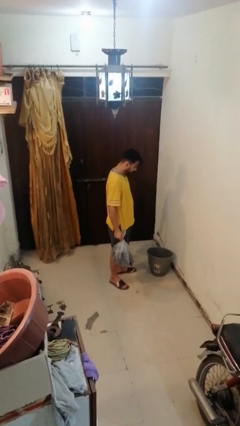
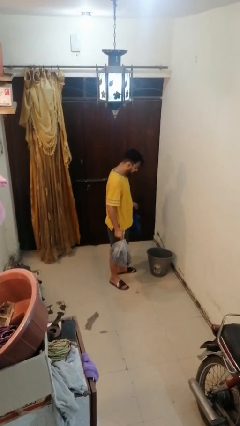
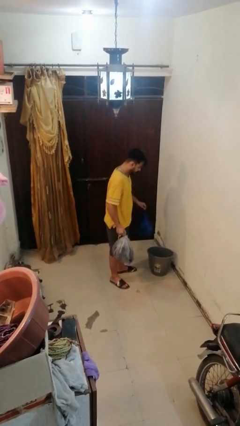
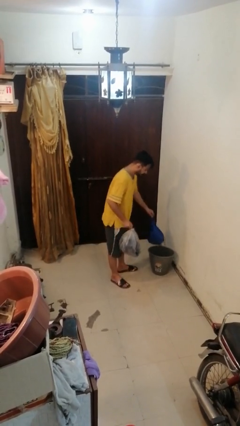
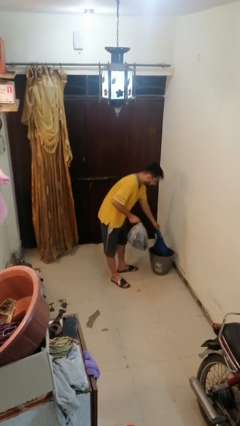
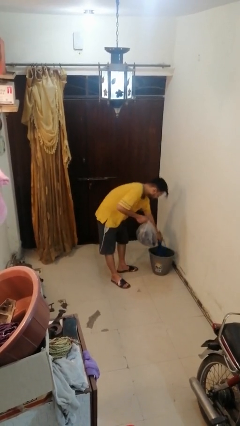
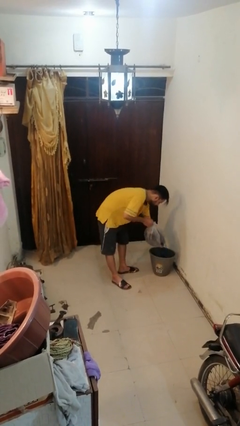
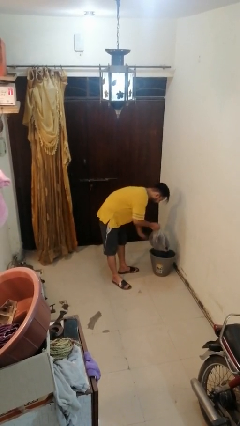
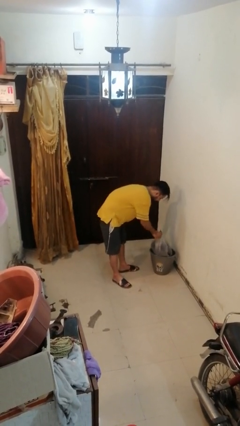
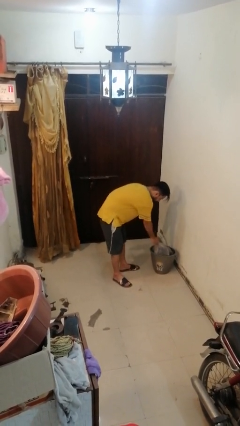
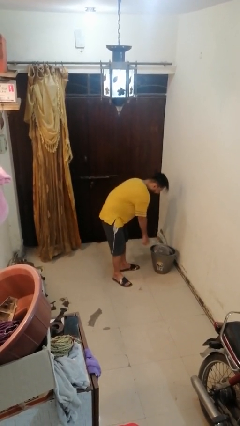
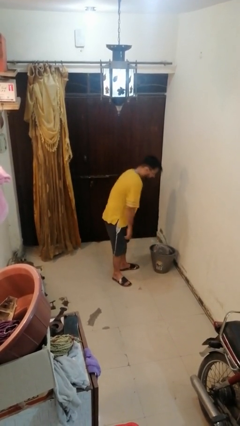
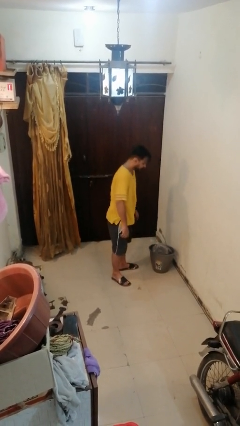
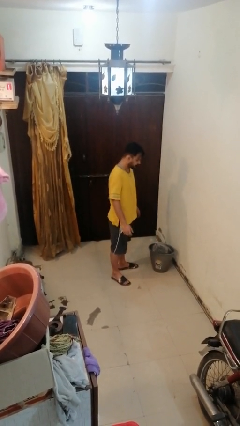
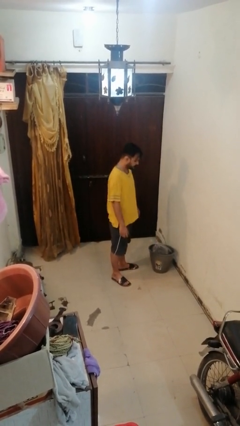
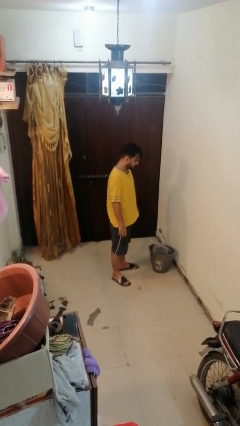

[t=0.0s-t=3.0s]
person discards trash

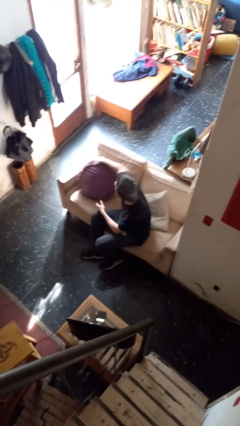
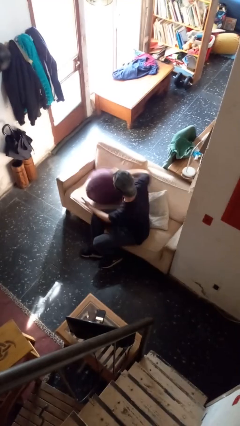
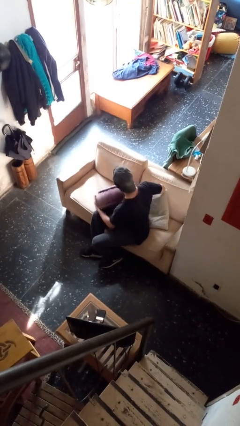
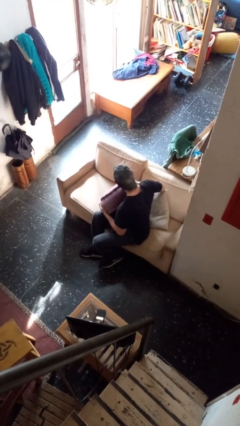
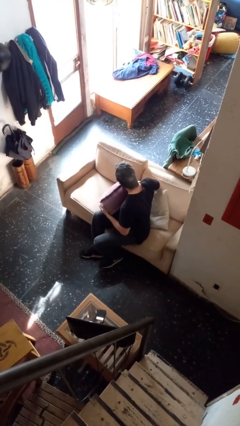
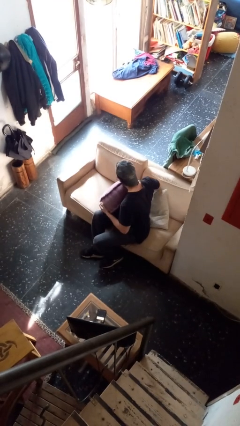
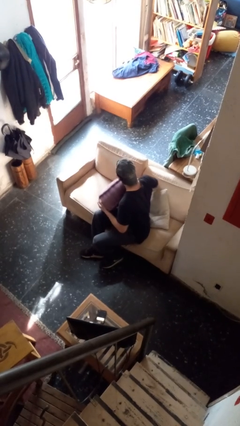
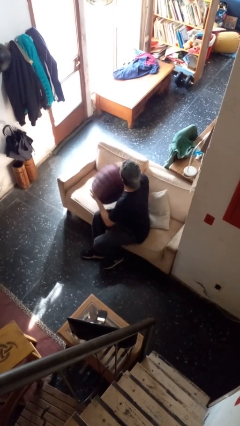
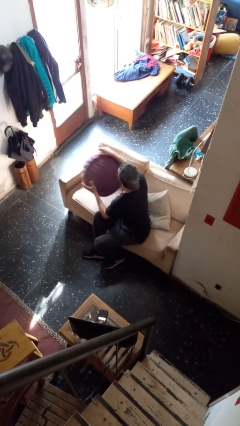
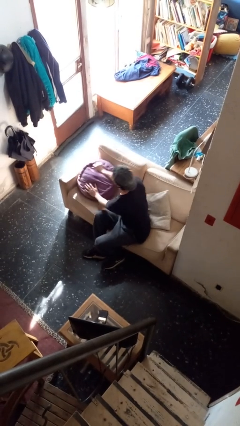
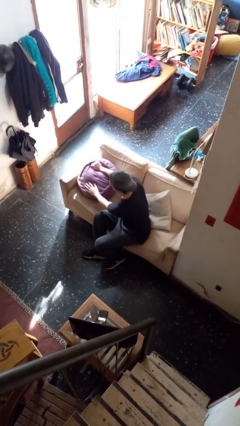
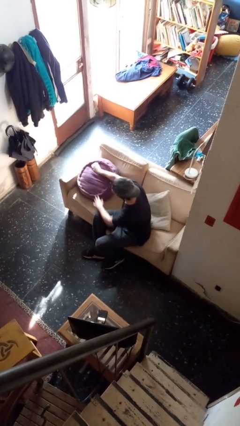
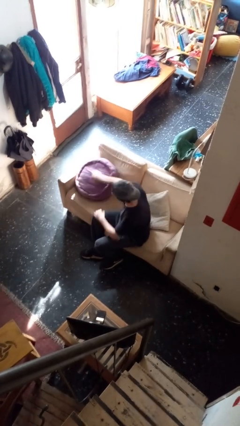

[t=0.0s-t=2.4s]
person searches in couch

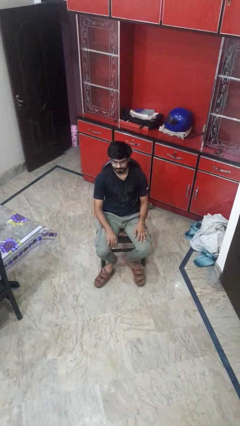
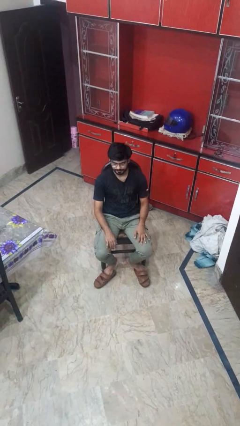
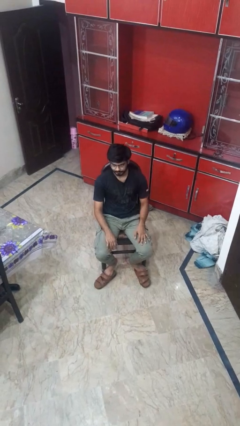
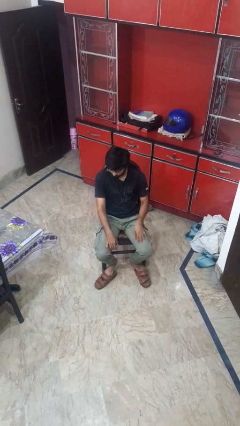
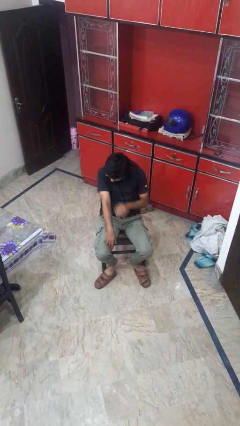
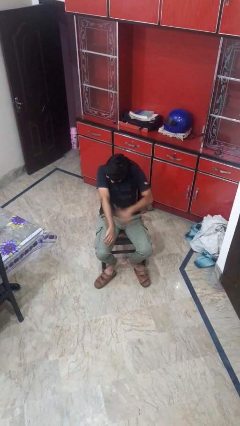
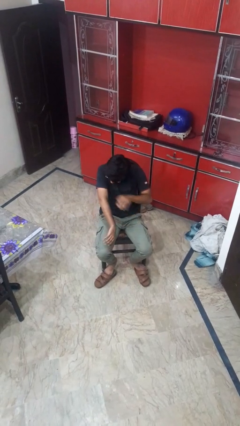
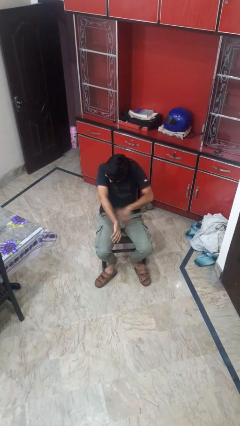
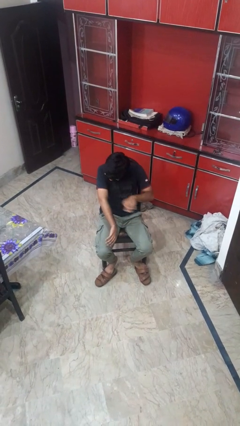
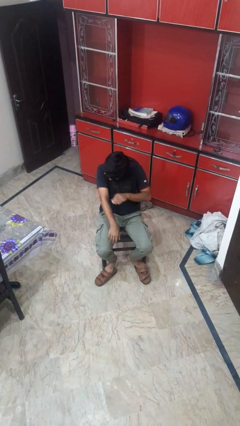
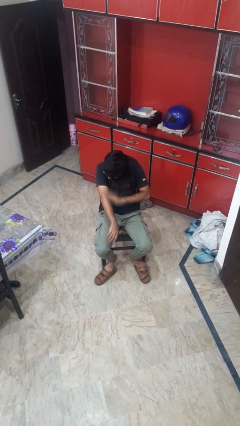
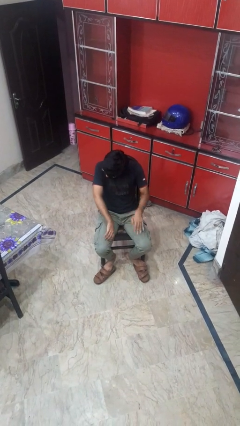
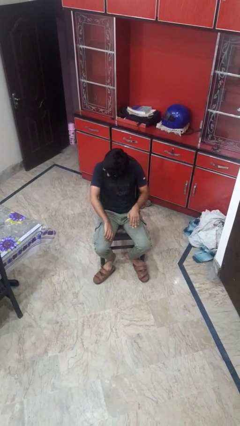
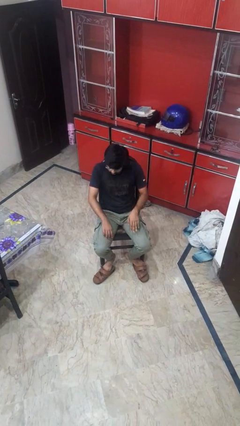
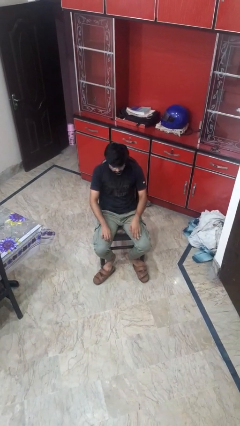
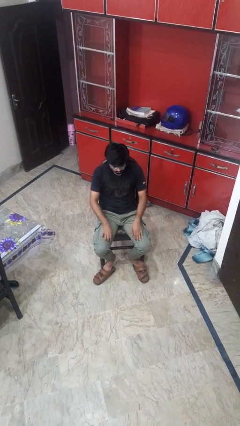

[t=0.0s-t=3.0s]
person swats bug

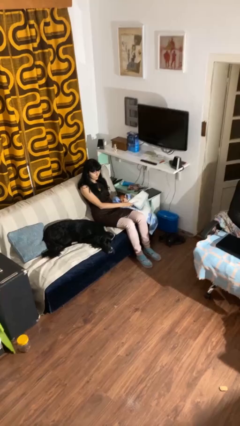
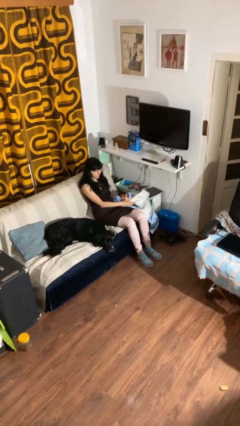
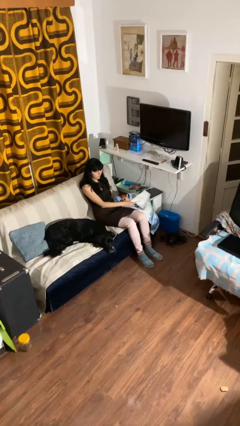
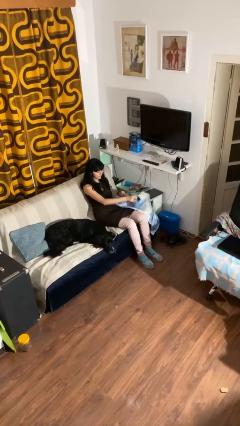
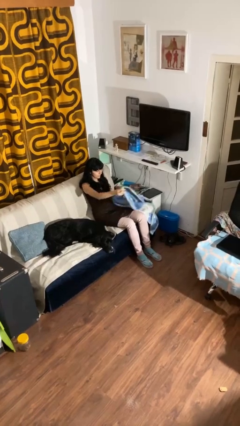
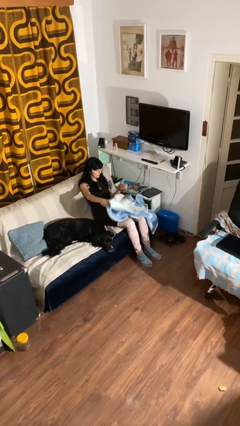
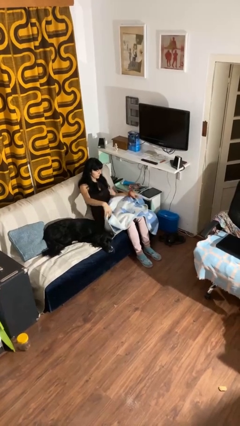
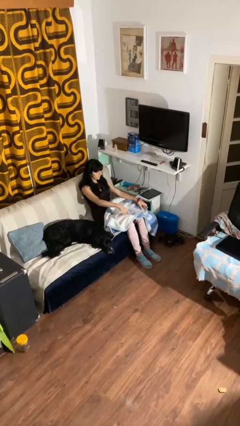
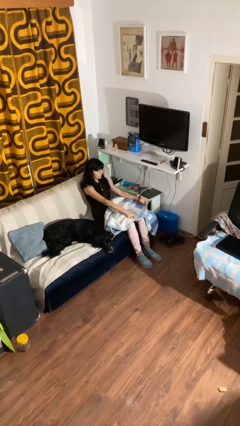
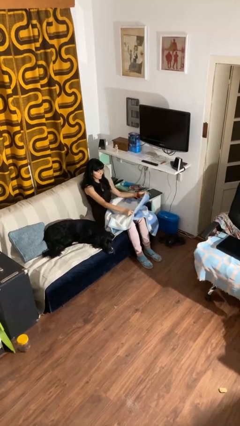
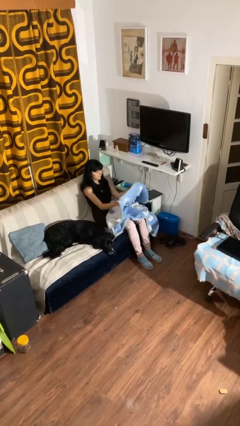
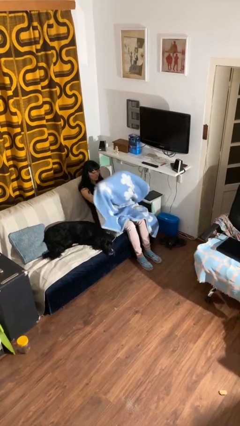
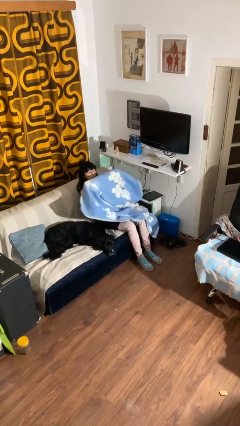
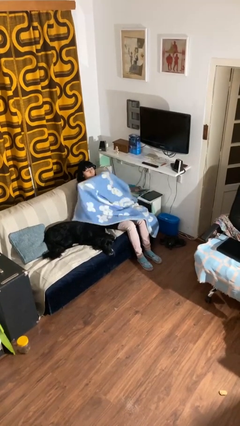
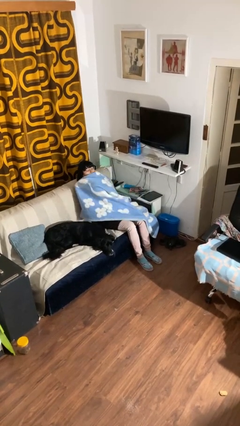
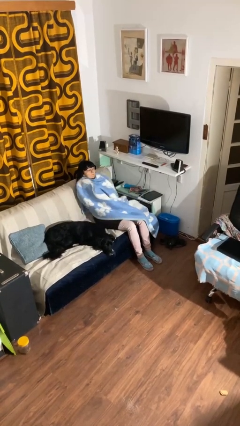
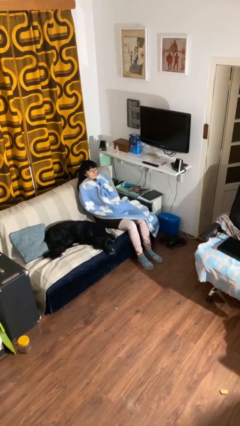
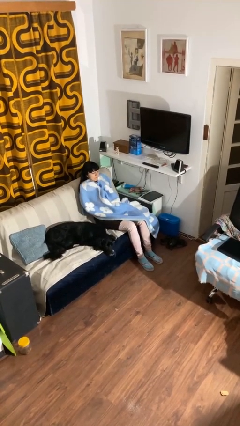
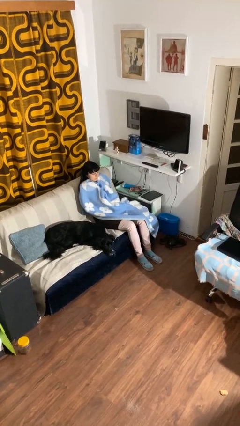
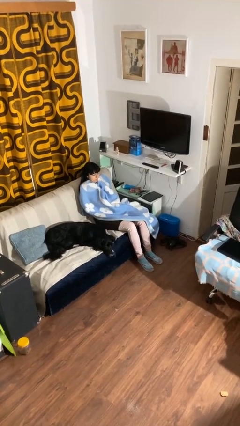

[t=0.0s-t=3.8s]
person covers with blanket

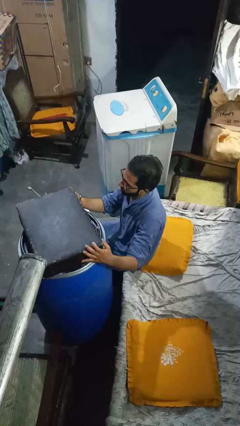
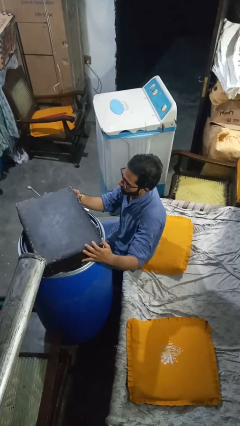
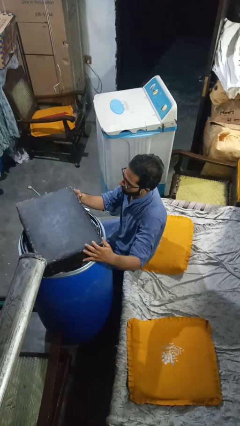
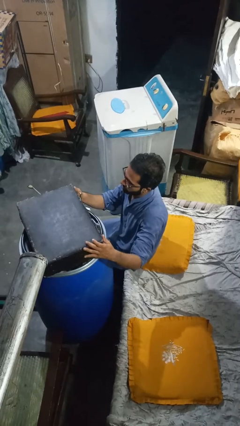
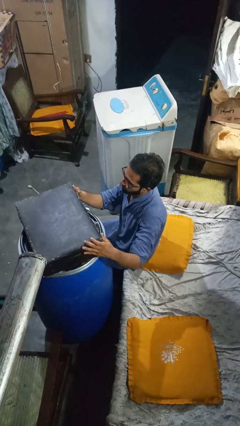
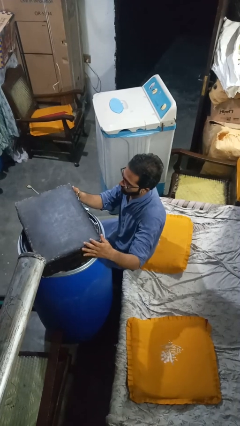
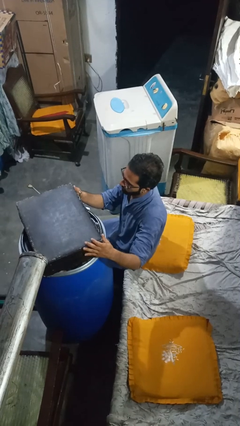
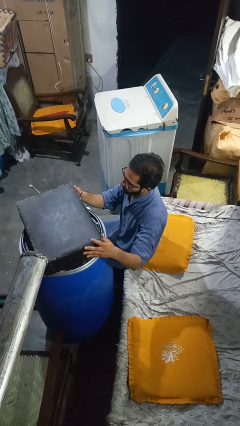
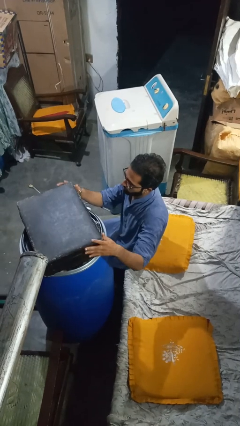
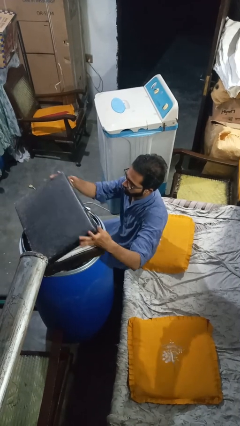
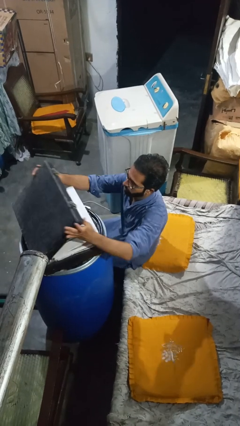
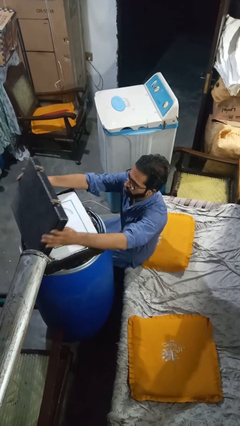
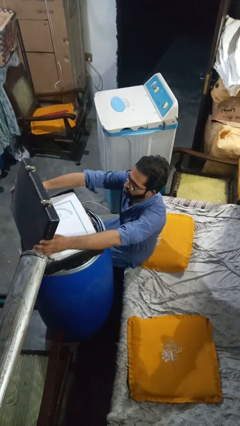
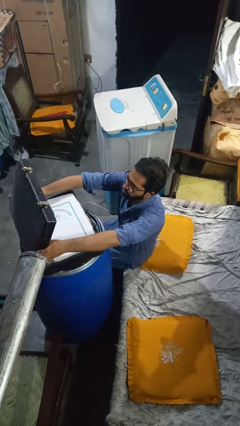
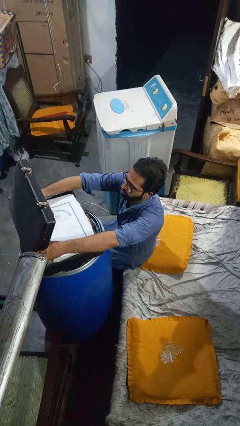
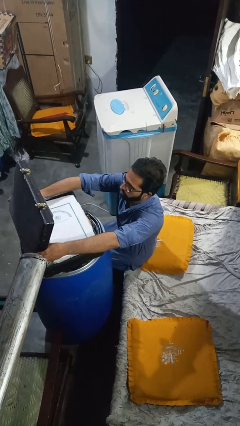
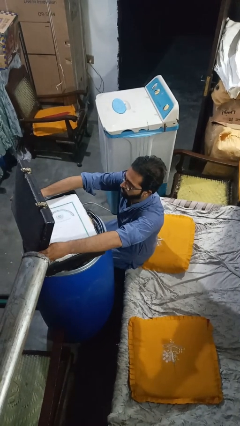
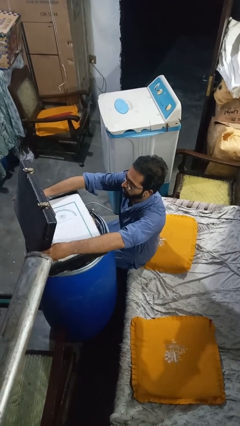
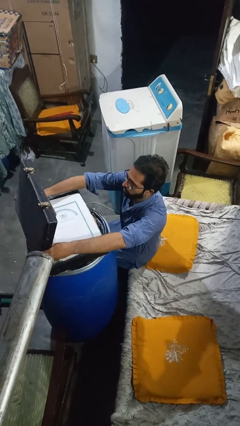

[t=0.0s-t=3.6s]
person opens suitcase

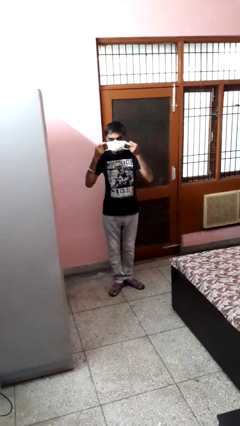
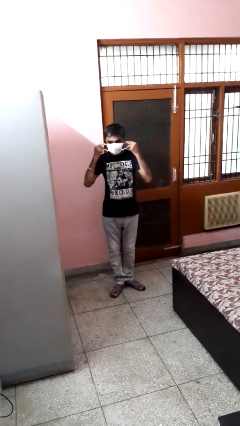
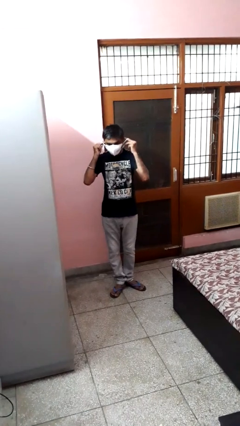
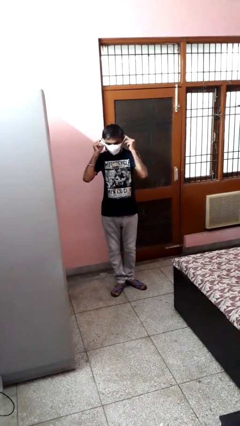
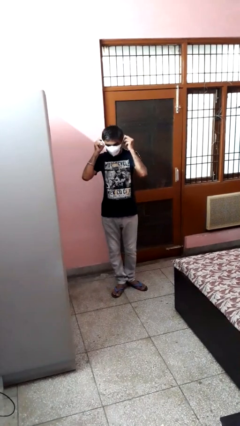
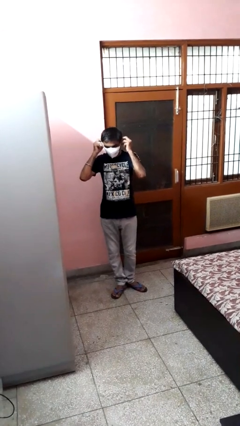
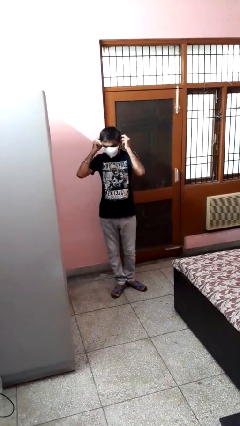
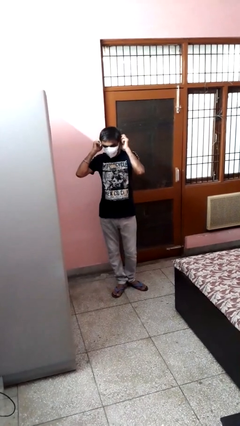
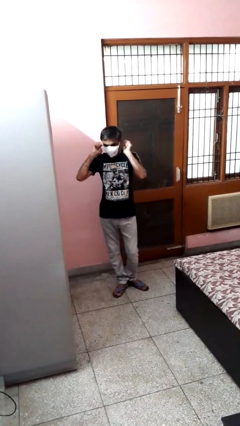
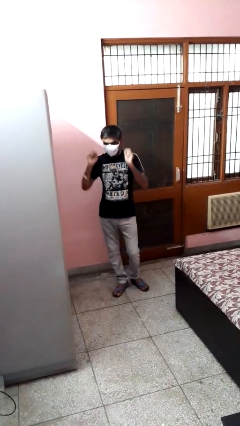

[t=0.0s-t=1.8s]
person puts on facemask
